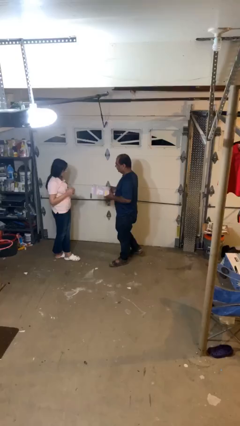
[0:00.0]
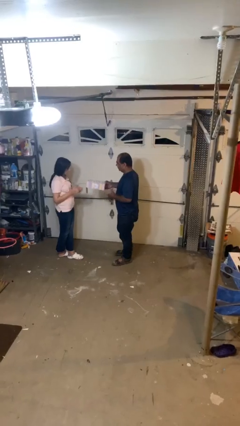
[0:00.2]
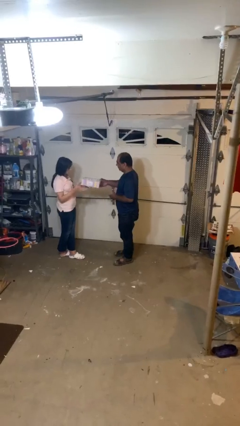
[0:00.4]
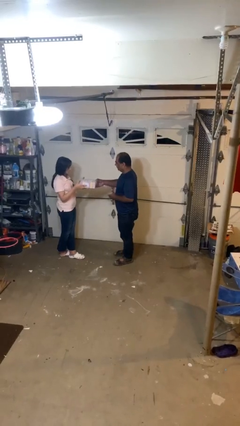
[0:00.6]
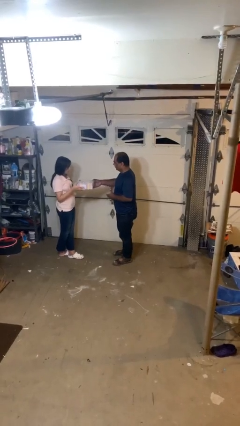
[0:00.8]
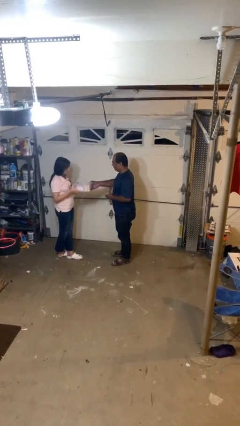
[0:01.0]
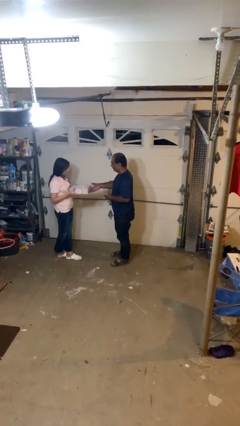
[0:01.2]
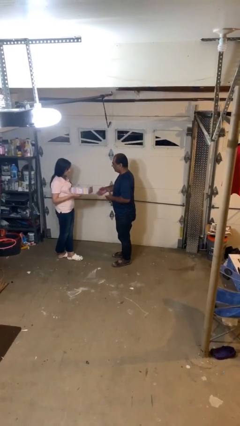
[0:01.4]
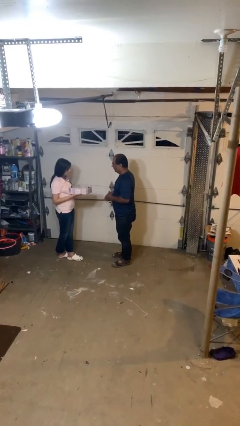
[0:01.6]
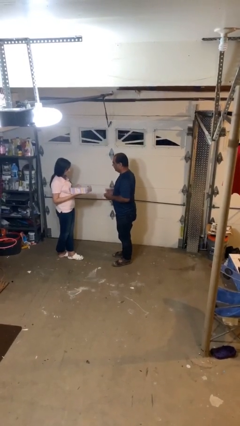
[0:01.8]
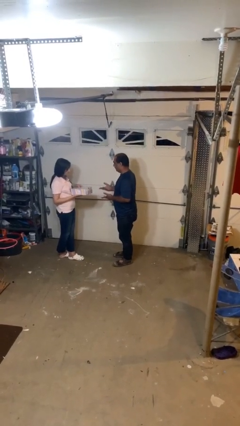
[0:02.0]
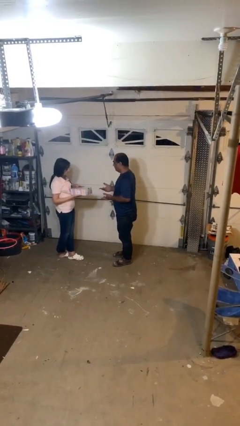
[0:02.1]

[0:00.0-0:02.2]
person transfers object to person

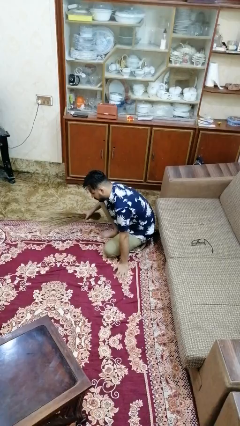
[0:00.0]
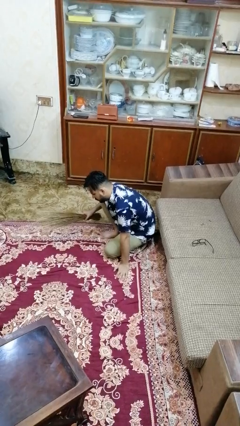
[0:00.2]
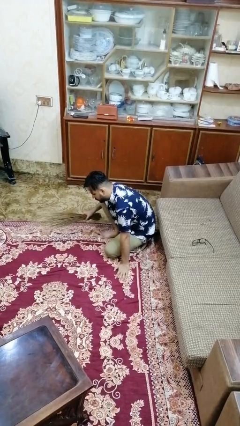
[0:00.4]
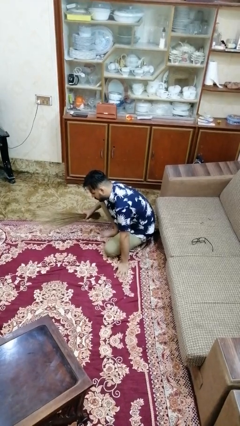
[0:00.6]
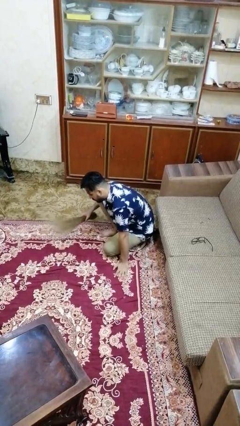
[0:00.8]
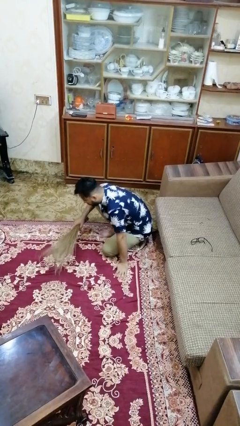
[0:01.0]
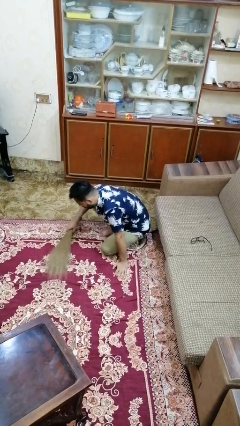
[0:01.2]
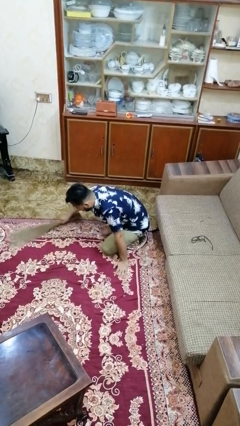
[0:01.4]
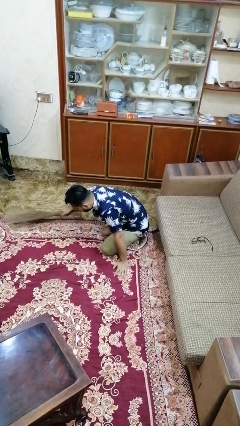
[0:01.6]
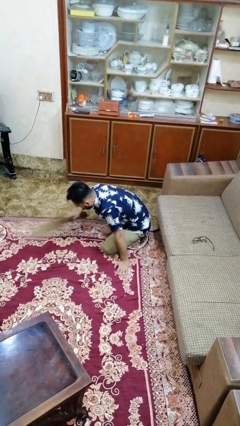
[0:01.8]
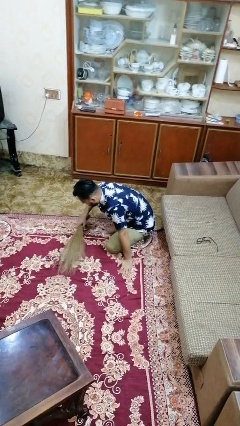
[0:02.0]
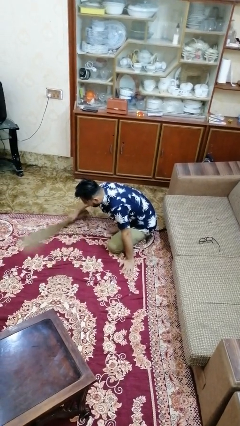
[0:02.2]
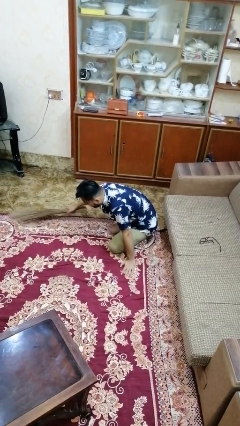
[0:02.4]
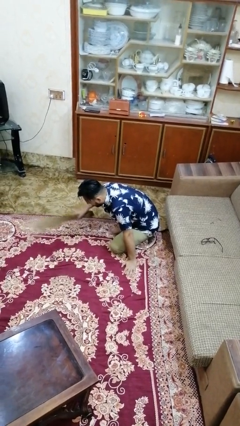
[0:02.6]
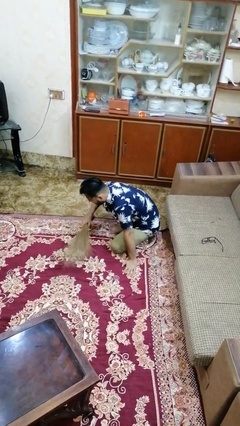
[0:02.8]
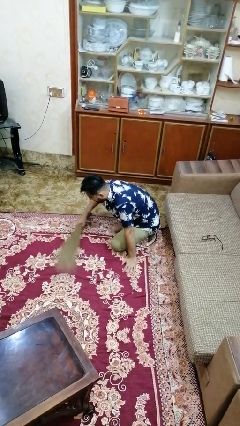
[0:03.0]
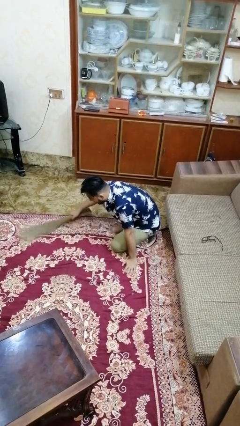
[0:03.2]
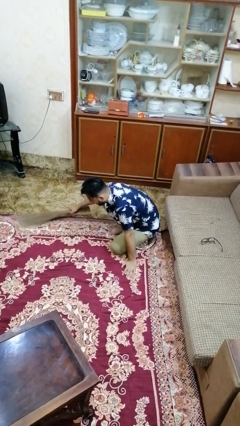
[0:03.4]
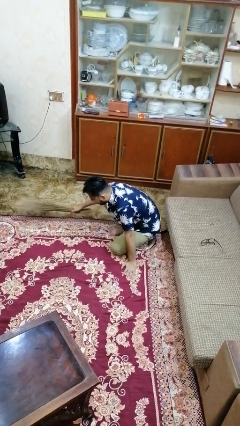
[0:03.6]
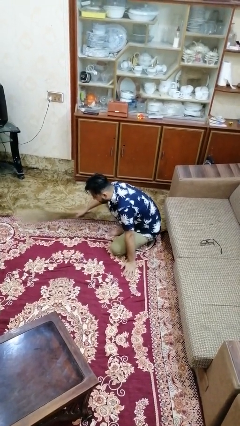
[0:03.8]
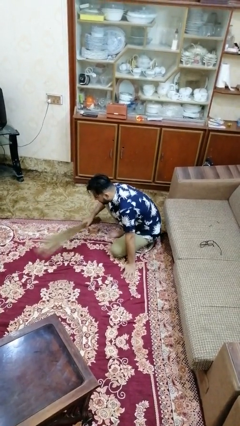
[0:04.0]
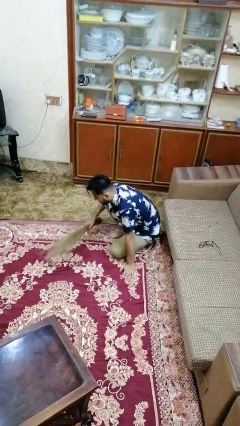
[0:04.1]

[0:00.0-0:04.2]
person sweeps floor

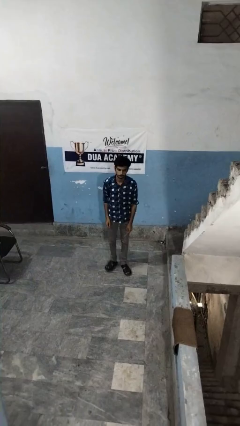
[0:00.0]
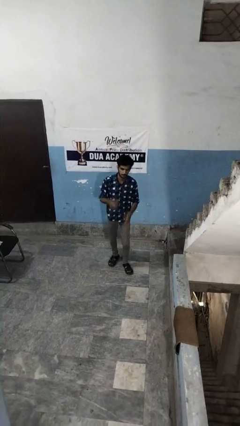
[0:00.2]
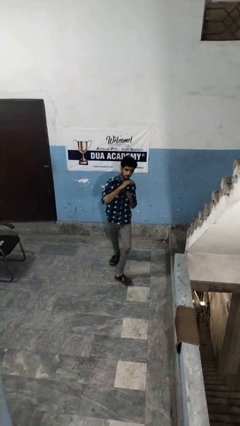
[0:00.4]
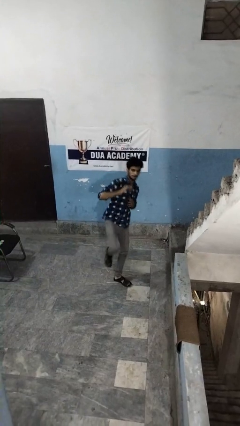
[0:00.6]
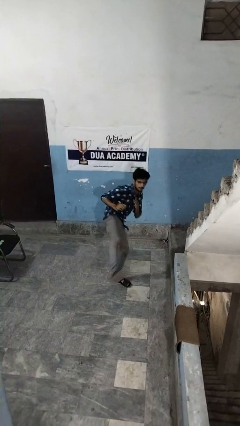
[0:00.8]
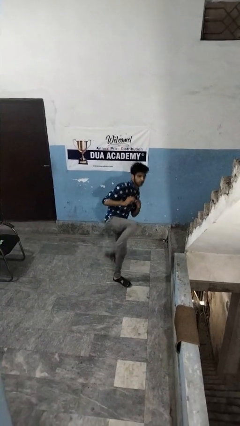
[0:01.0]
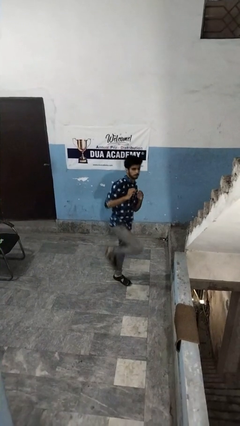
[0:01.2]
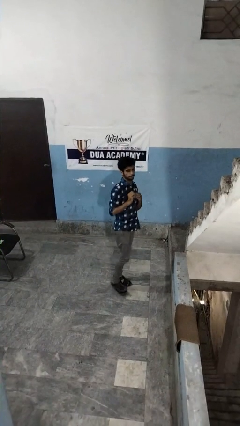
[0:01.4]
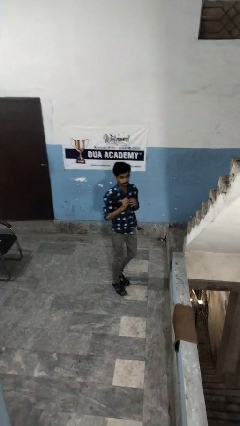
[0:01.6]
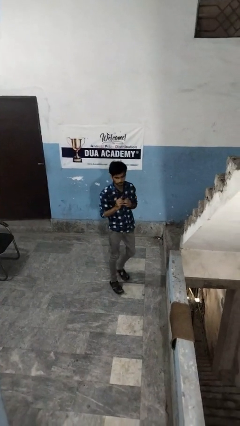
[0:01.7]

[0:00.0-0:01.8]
person karate kicks

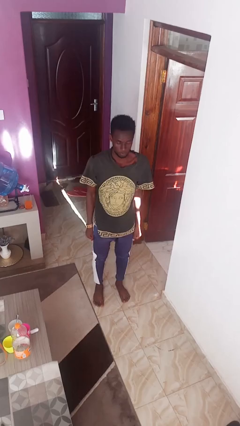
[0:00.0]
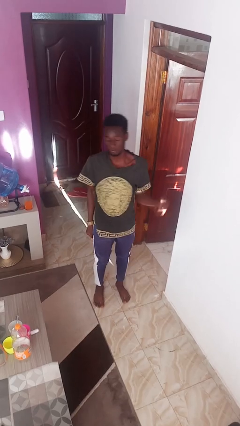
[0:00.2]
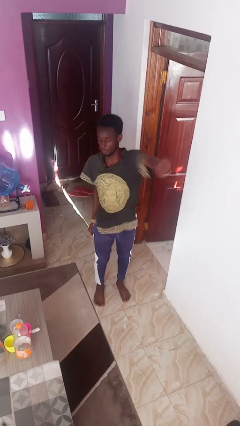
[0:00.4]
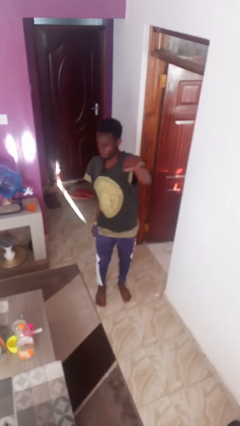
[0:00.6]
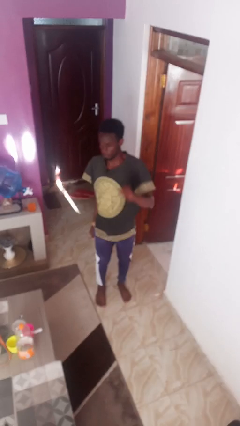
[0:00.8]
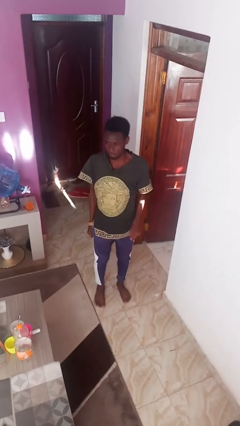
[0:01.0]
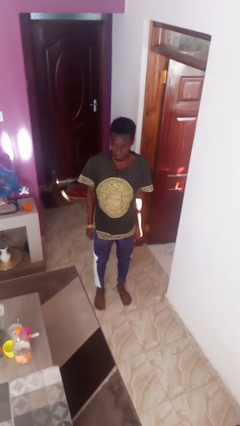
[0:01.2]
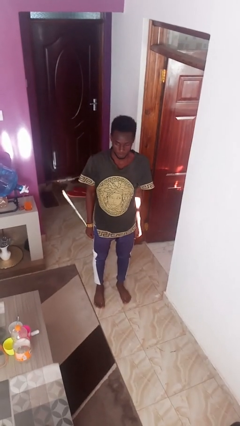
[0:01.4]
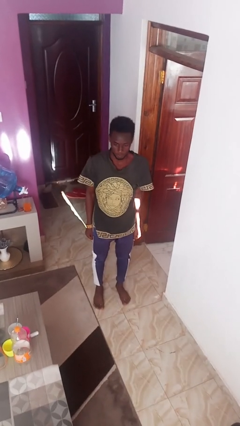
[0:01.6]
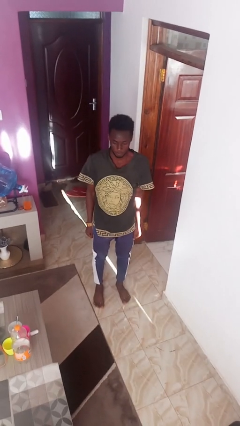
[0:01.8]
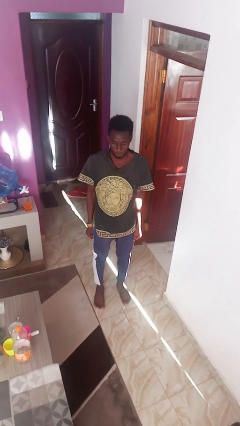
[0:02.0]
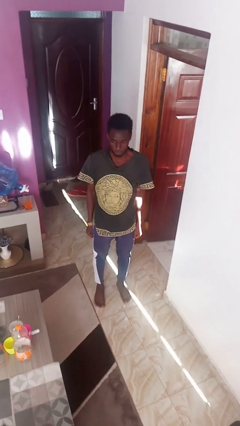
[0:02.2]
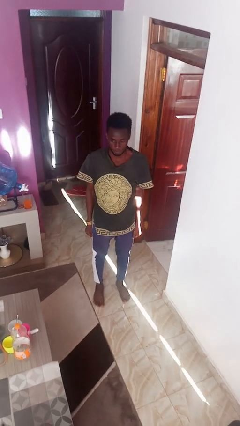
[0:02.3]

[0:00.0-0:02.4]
person punches

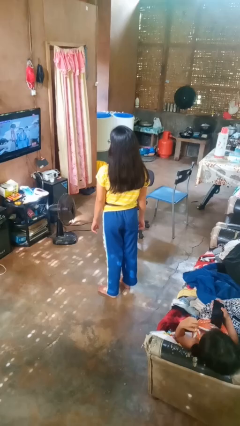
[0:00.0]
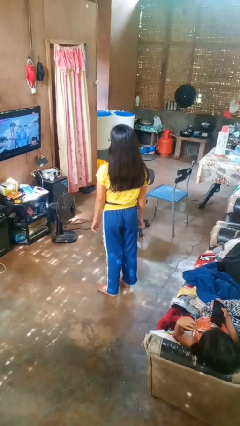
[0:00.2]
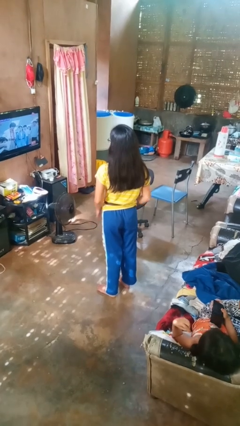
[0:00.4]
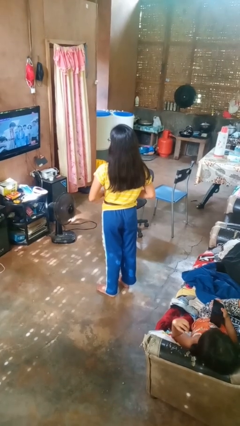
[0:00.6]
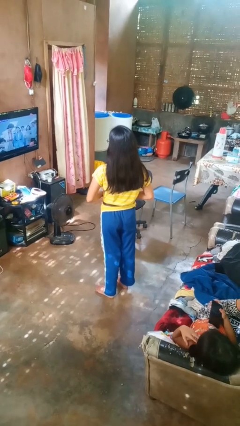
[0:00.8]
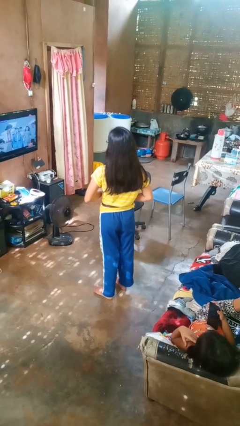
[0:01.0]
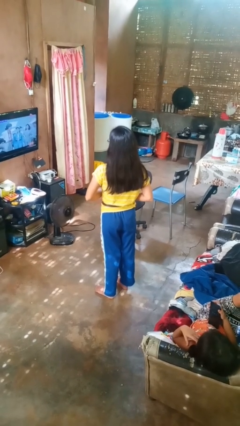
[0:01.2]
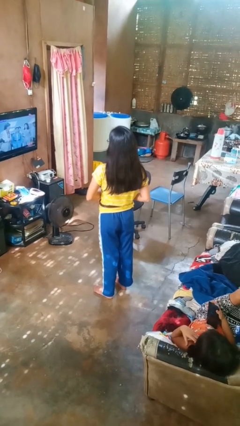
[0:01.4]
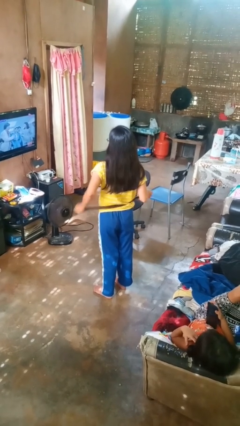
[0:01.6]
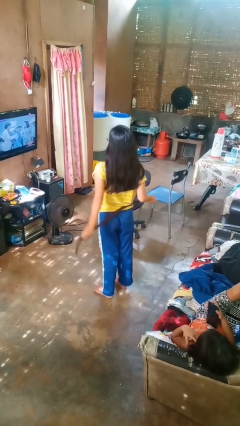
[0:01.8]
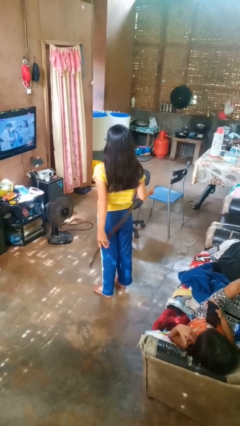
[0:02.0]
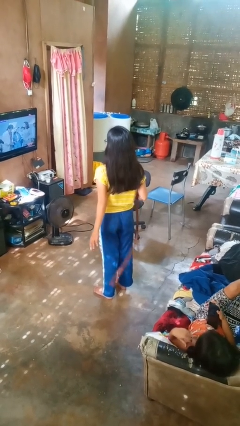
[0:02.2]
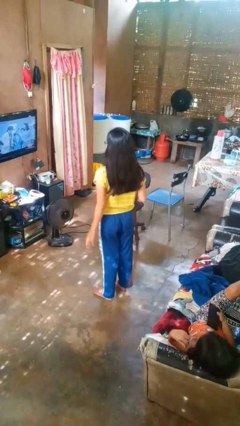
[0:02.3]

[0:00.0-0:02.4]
person takes off belt

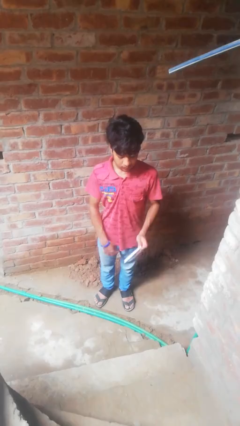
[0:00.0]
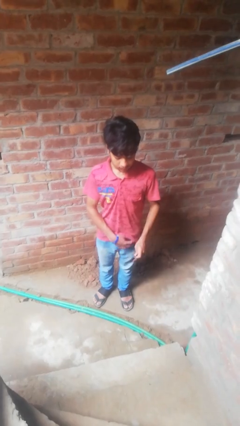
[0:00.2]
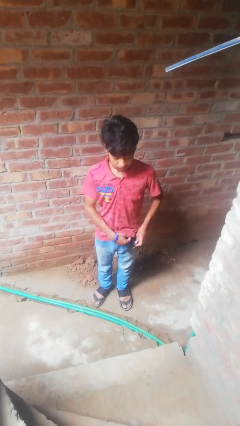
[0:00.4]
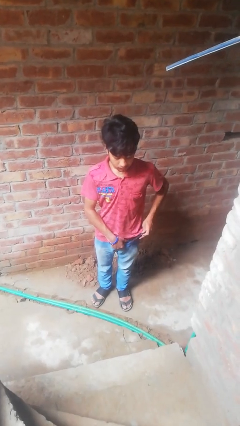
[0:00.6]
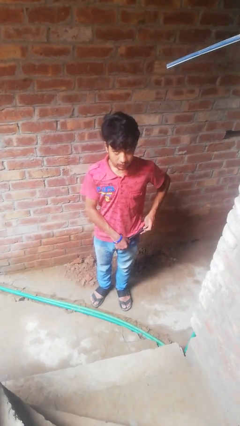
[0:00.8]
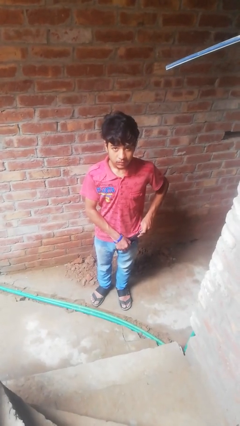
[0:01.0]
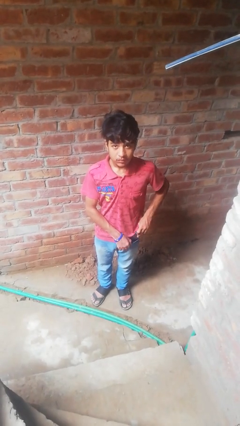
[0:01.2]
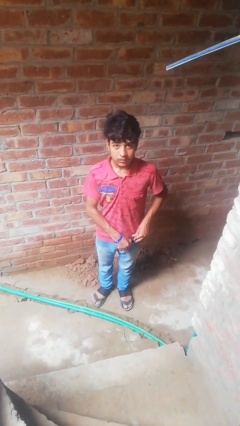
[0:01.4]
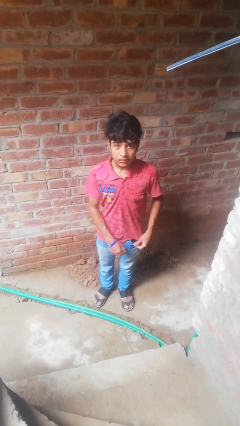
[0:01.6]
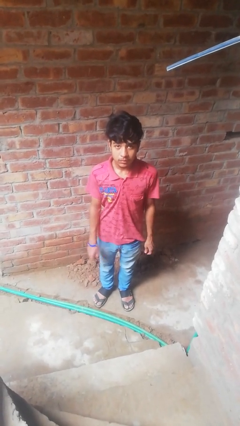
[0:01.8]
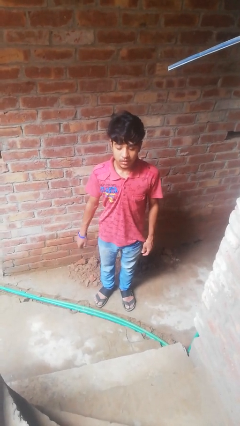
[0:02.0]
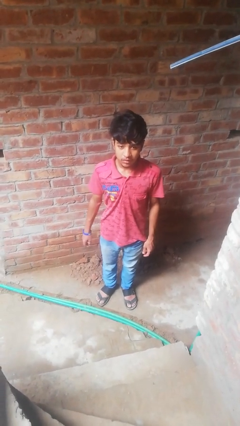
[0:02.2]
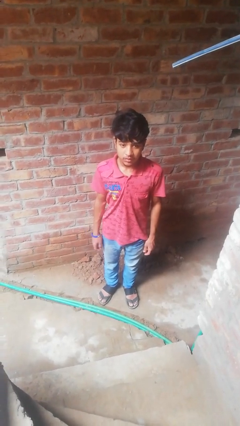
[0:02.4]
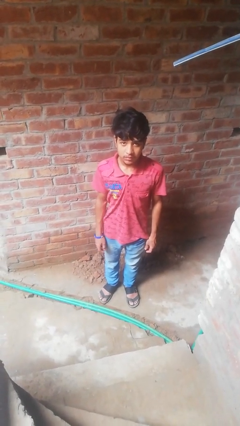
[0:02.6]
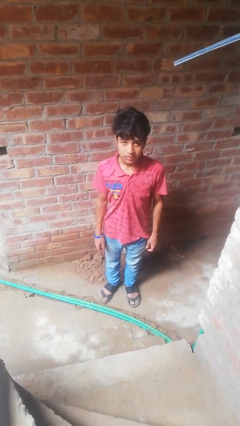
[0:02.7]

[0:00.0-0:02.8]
person puts phone into pocket

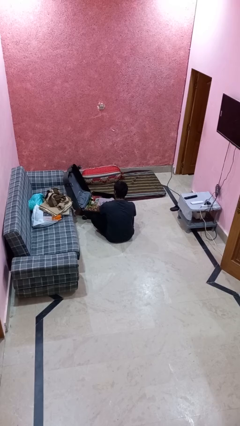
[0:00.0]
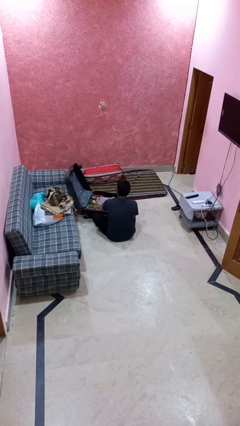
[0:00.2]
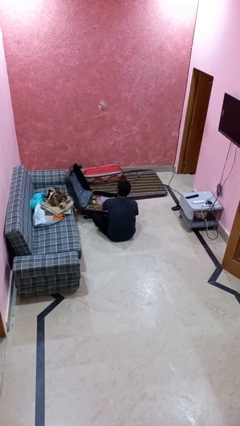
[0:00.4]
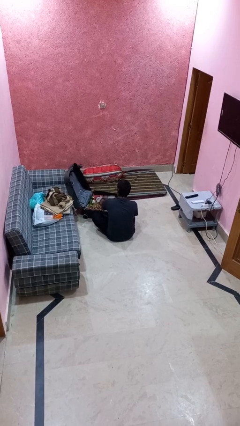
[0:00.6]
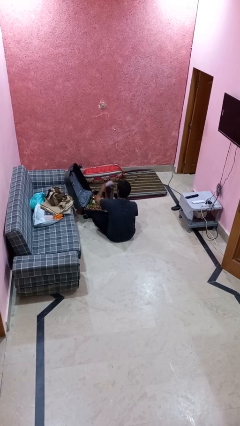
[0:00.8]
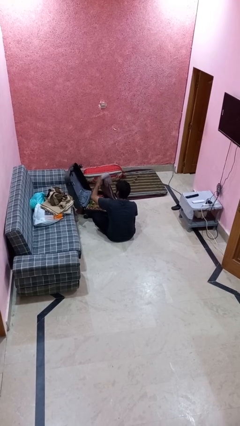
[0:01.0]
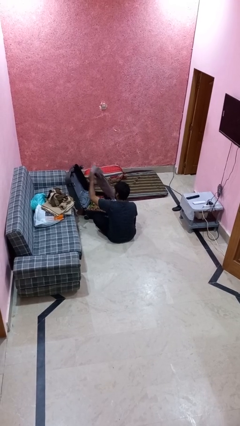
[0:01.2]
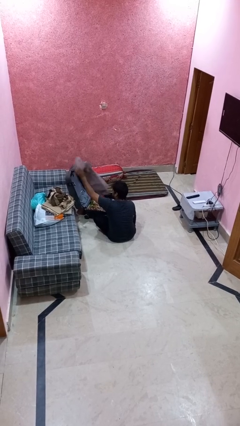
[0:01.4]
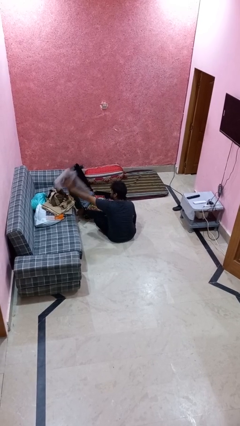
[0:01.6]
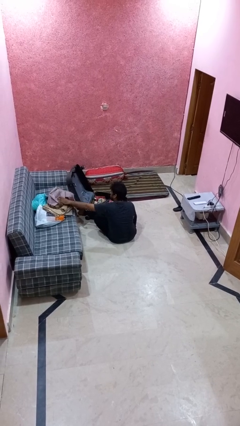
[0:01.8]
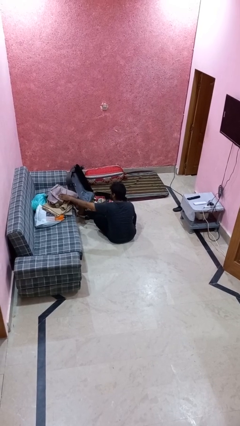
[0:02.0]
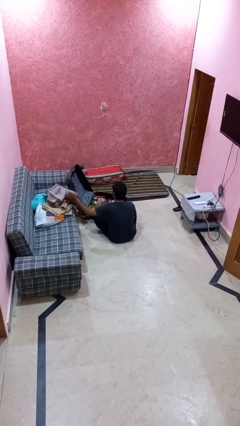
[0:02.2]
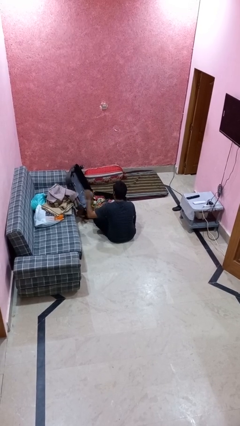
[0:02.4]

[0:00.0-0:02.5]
person unloads clothes from suitcase
